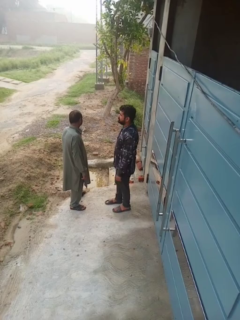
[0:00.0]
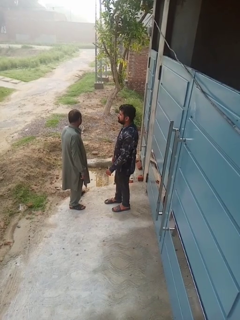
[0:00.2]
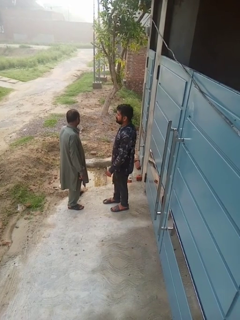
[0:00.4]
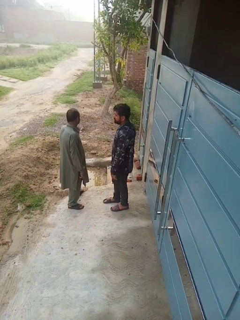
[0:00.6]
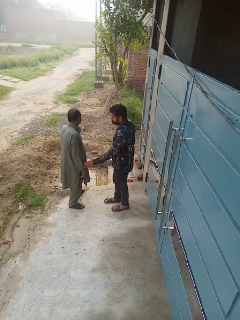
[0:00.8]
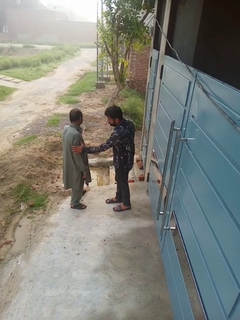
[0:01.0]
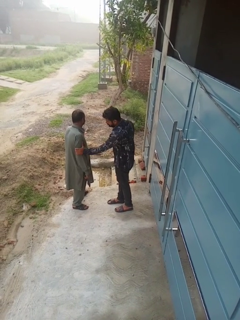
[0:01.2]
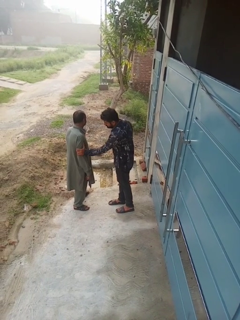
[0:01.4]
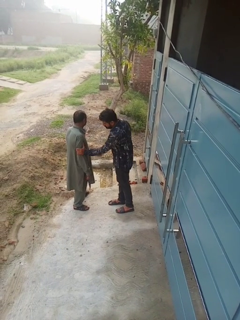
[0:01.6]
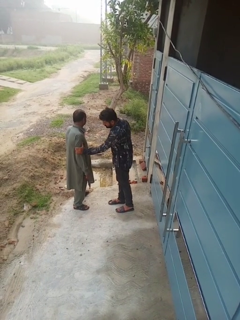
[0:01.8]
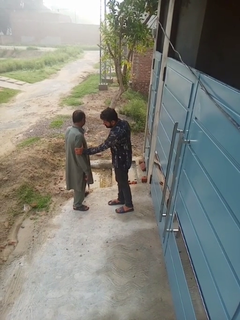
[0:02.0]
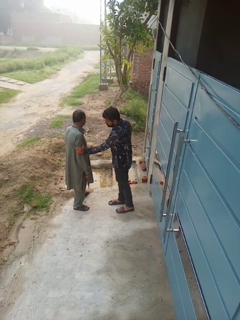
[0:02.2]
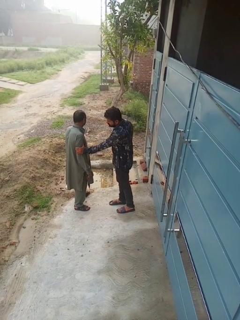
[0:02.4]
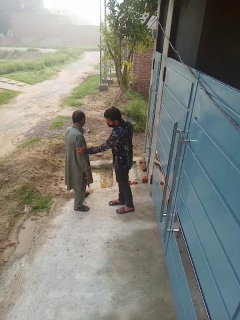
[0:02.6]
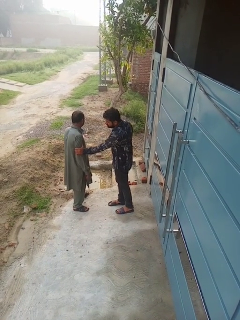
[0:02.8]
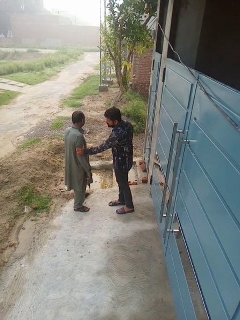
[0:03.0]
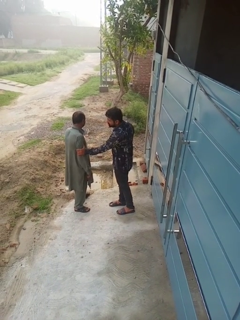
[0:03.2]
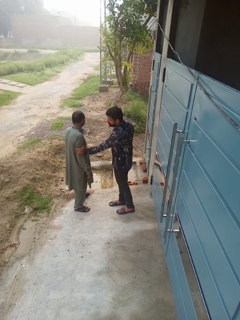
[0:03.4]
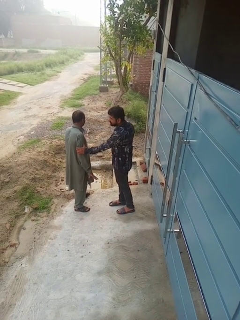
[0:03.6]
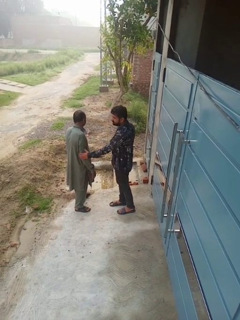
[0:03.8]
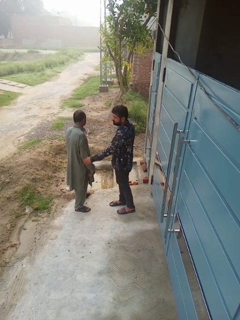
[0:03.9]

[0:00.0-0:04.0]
person grabs person by forearm

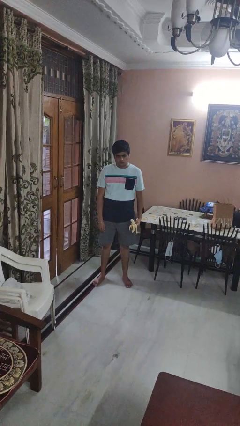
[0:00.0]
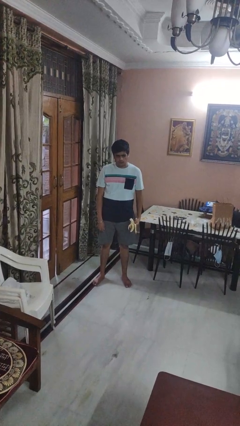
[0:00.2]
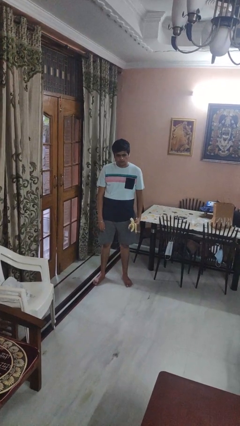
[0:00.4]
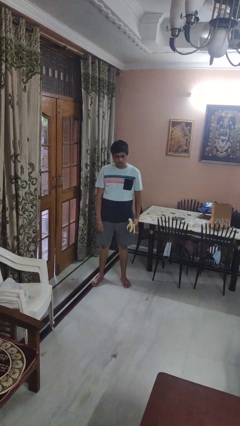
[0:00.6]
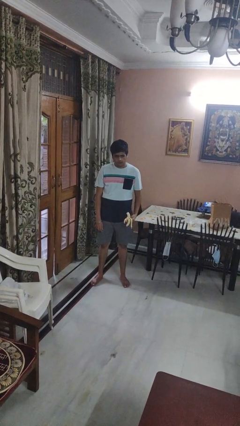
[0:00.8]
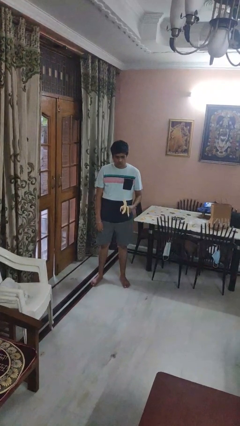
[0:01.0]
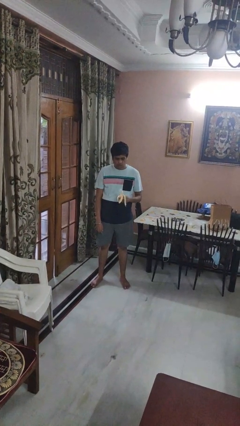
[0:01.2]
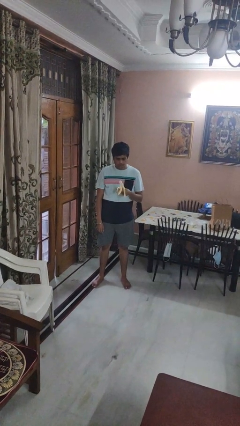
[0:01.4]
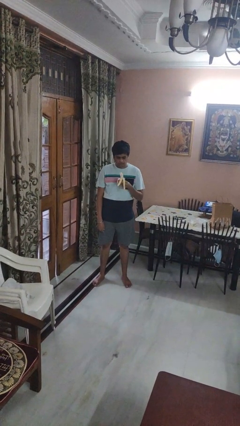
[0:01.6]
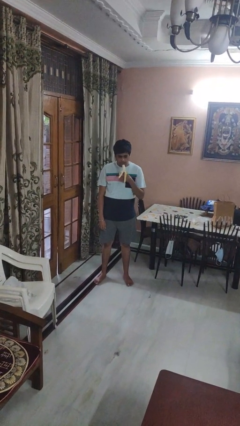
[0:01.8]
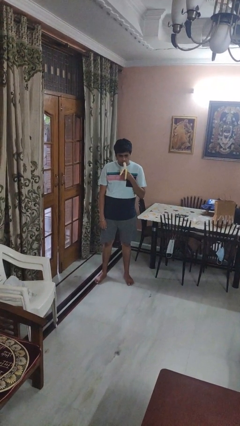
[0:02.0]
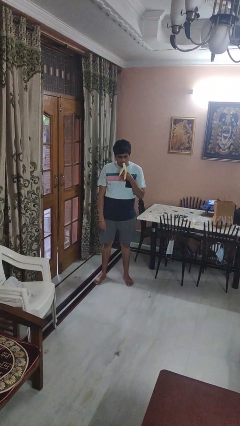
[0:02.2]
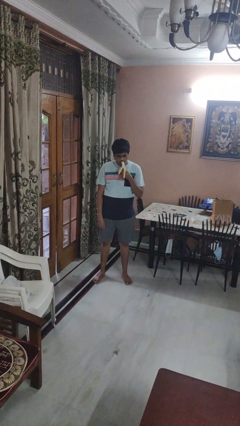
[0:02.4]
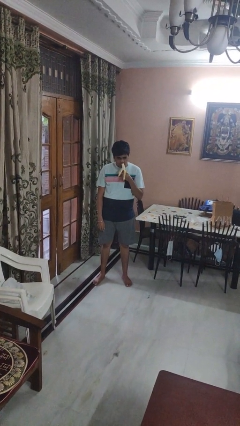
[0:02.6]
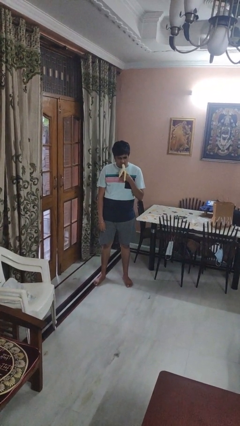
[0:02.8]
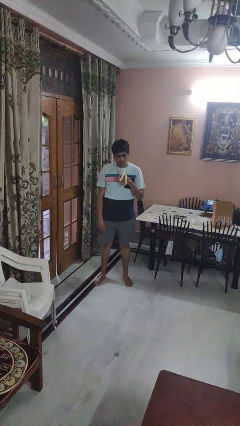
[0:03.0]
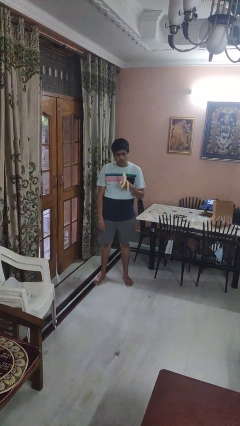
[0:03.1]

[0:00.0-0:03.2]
person eats banana

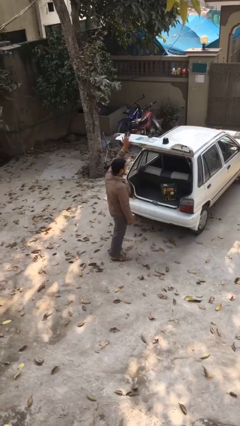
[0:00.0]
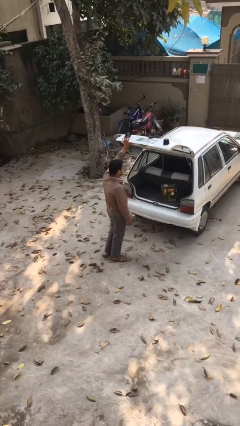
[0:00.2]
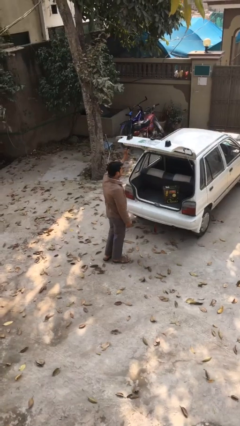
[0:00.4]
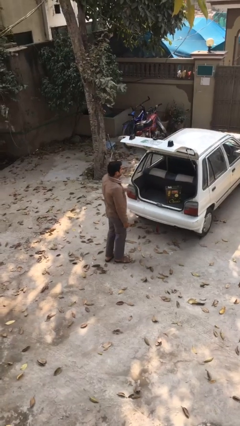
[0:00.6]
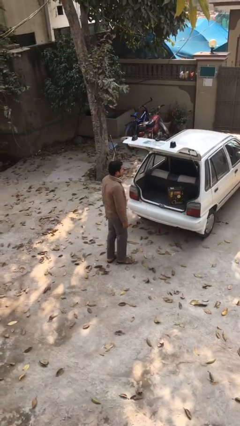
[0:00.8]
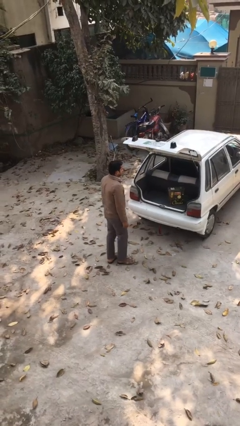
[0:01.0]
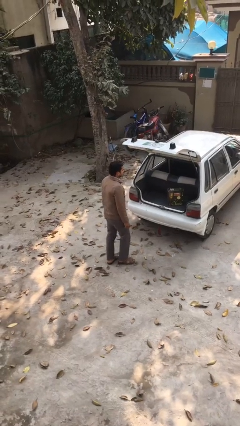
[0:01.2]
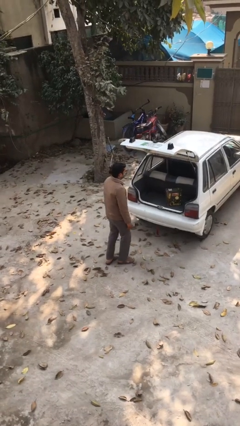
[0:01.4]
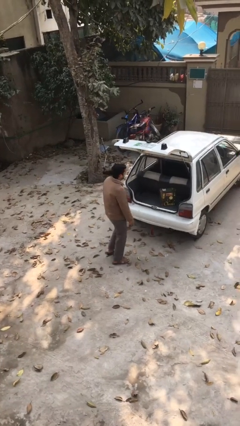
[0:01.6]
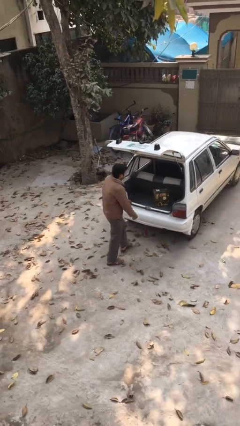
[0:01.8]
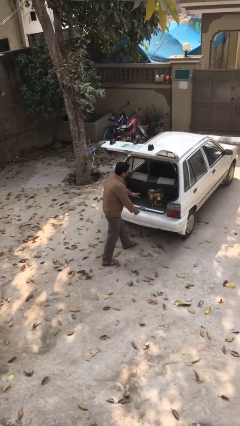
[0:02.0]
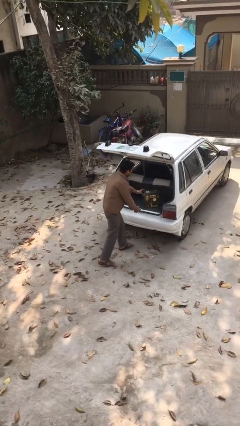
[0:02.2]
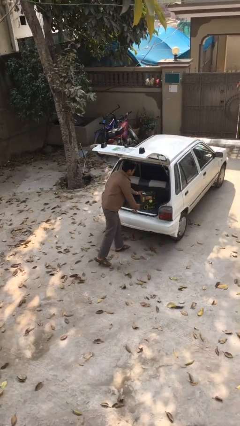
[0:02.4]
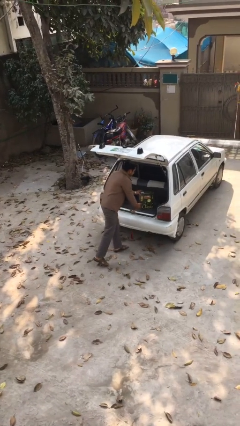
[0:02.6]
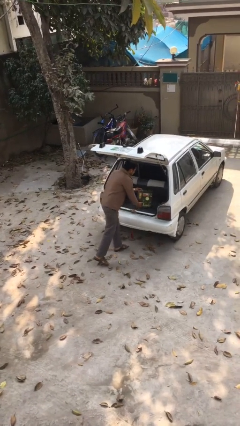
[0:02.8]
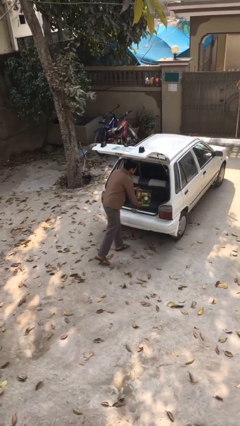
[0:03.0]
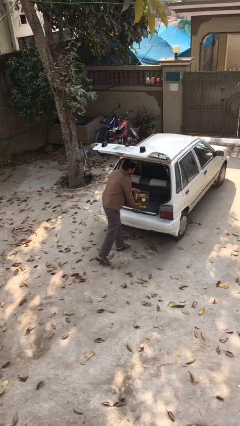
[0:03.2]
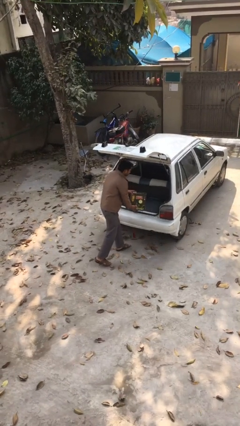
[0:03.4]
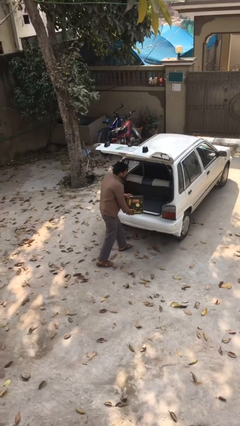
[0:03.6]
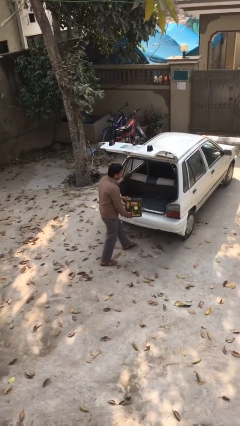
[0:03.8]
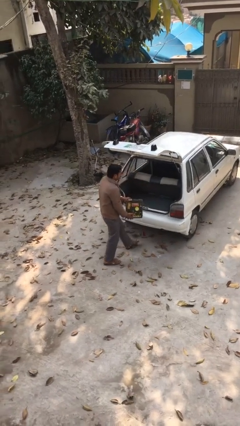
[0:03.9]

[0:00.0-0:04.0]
person unloads car

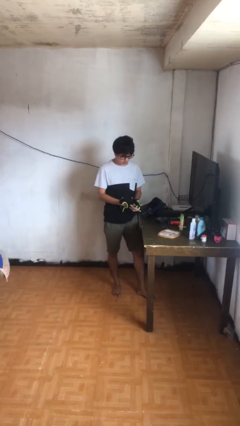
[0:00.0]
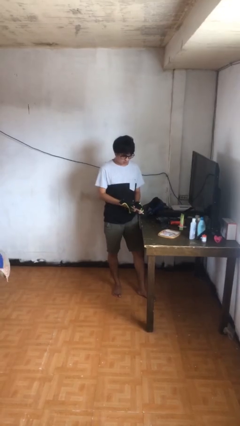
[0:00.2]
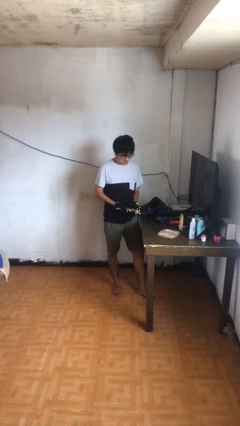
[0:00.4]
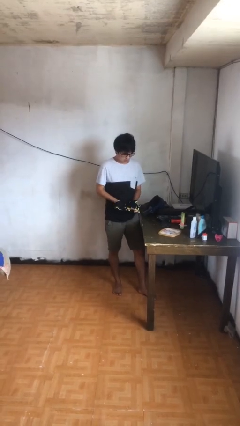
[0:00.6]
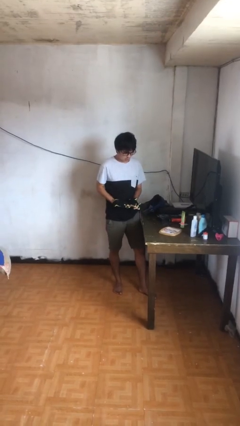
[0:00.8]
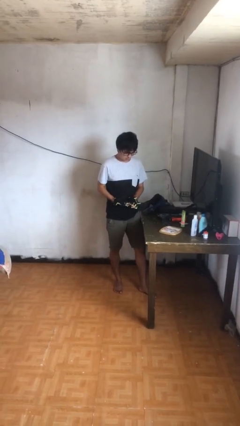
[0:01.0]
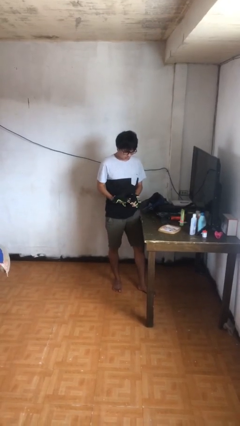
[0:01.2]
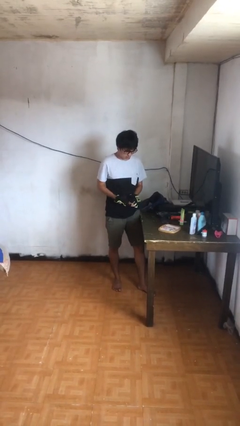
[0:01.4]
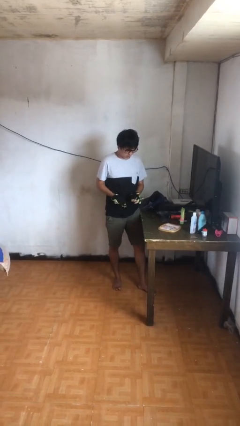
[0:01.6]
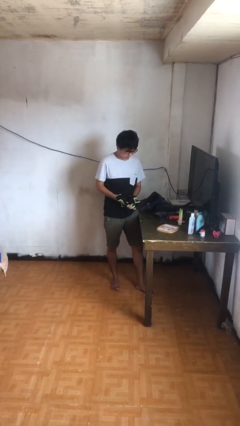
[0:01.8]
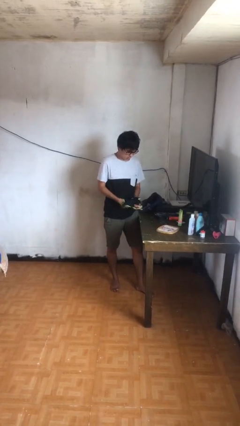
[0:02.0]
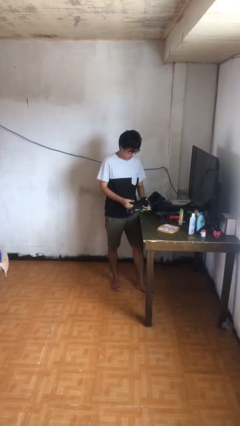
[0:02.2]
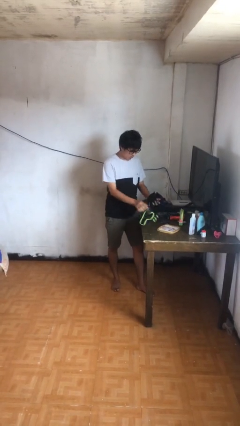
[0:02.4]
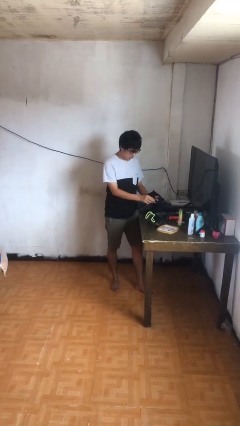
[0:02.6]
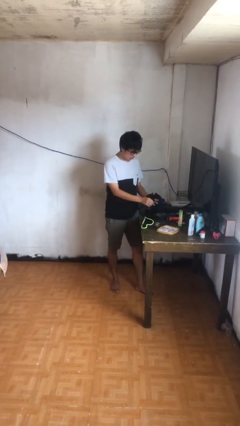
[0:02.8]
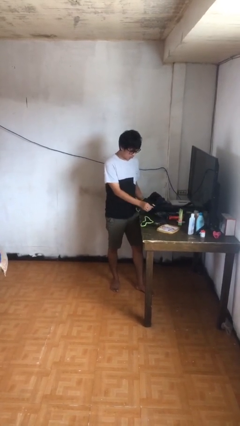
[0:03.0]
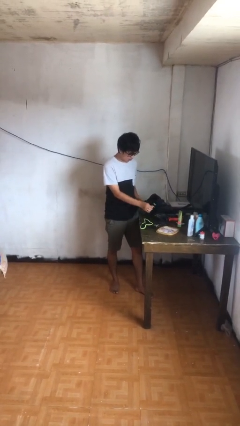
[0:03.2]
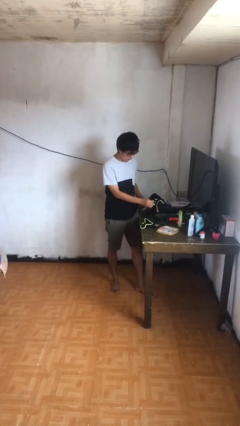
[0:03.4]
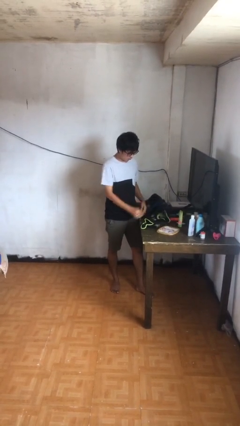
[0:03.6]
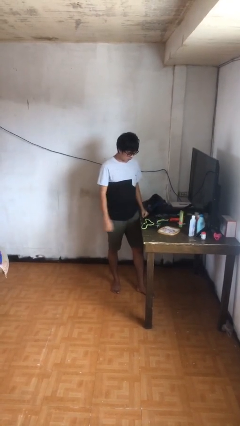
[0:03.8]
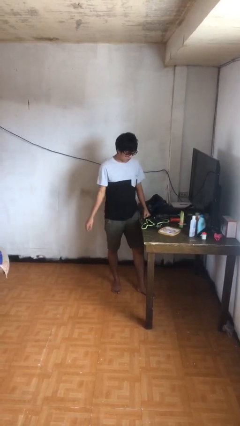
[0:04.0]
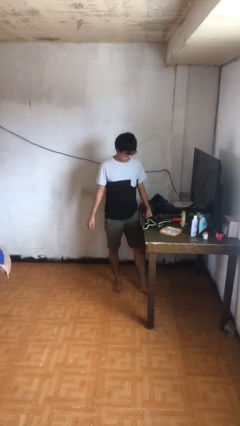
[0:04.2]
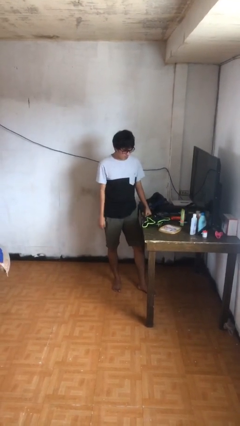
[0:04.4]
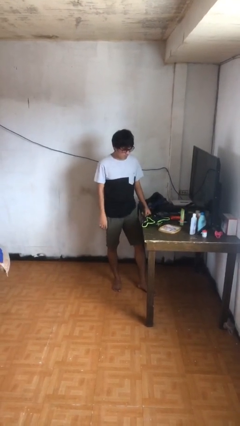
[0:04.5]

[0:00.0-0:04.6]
person takes off gloves

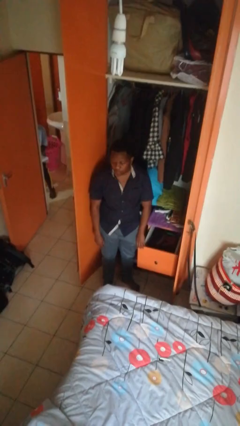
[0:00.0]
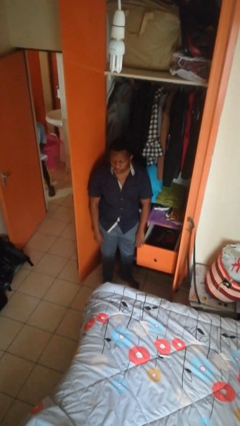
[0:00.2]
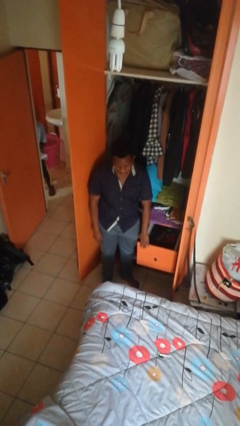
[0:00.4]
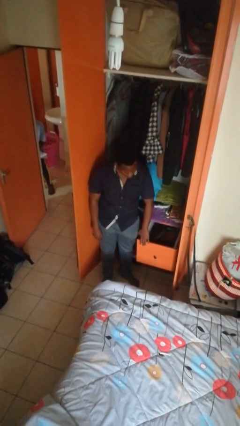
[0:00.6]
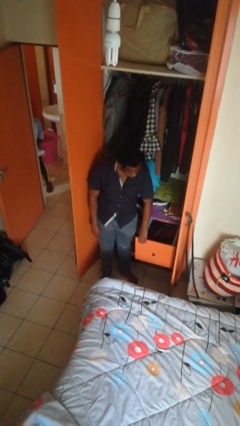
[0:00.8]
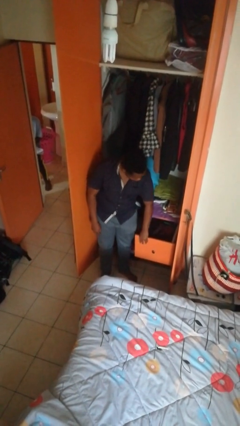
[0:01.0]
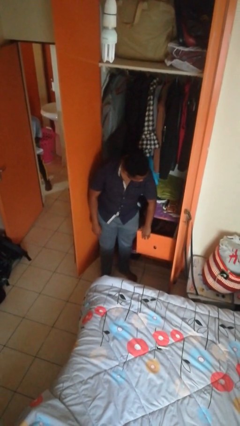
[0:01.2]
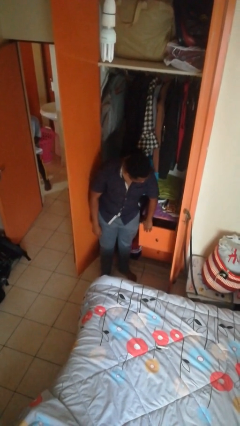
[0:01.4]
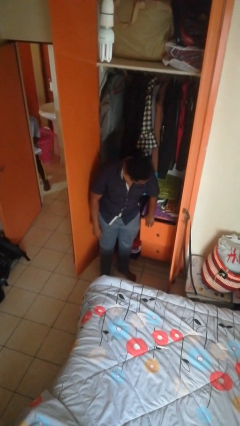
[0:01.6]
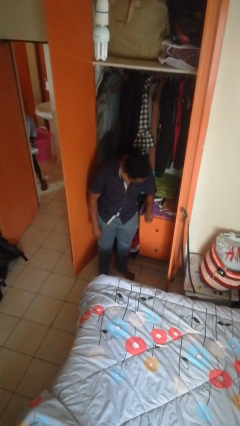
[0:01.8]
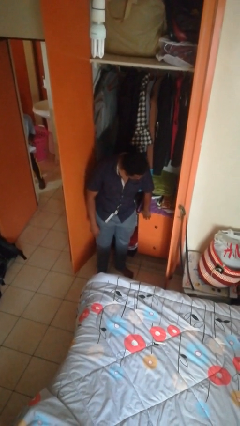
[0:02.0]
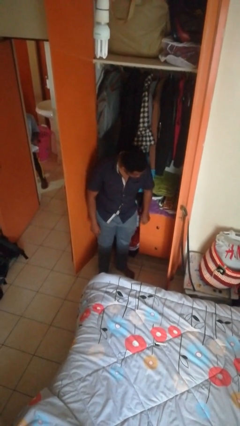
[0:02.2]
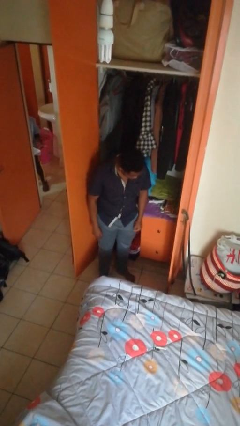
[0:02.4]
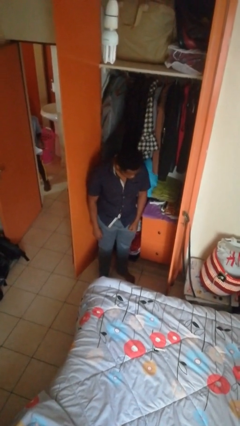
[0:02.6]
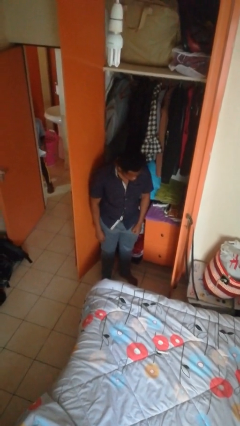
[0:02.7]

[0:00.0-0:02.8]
person closes dresser drawer
